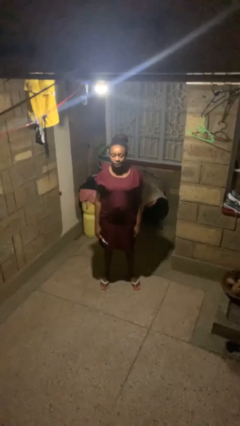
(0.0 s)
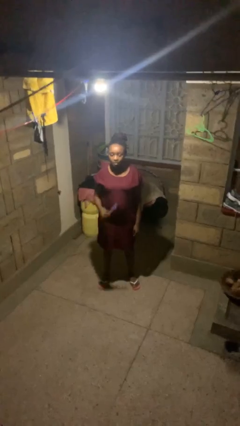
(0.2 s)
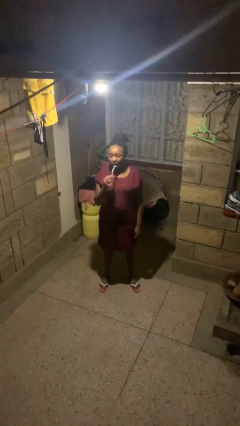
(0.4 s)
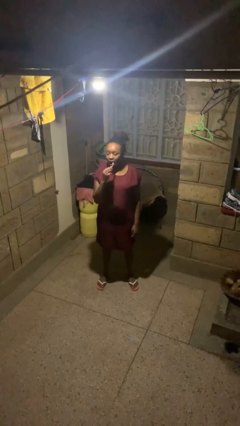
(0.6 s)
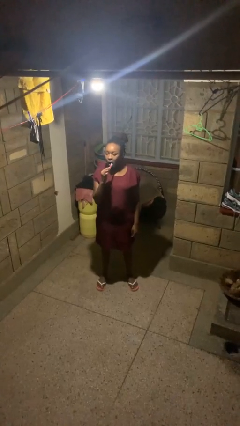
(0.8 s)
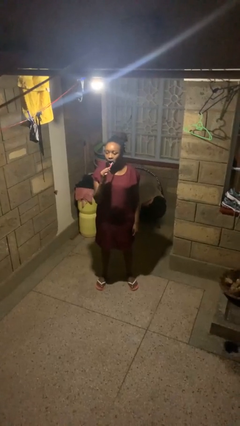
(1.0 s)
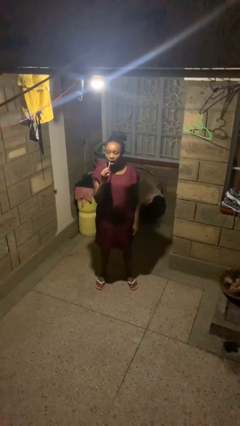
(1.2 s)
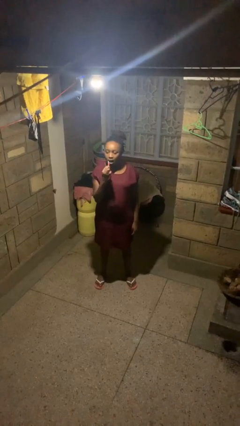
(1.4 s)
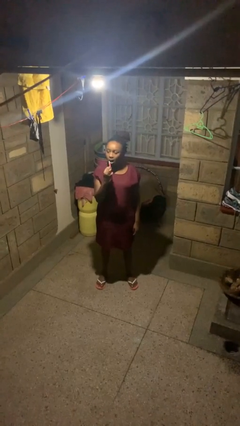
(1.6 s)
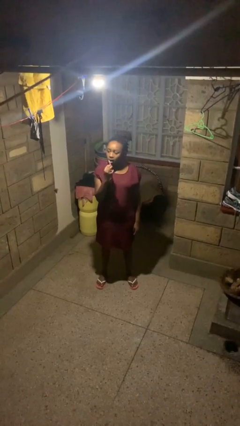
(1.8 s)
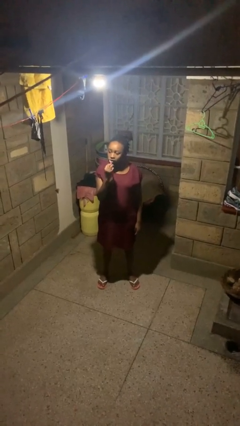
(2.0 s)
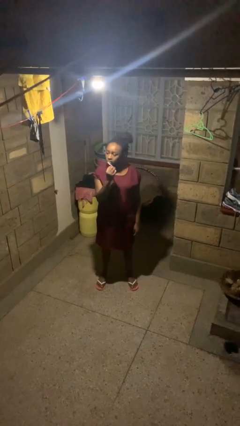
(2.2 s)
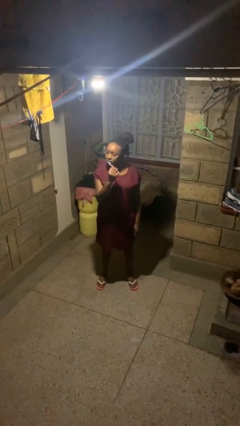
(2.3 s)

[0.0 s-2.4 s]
person brushes teeth

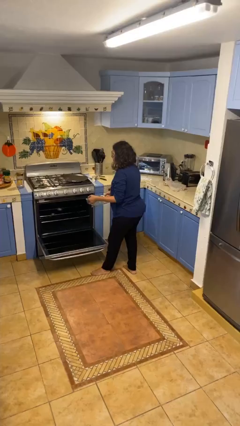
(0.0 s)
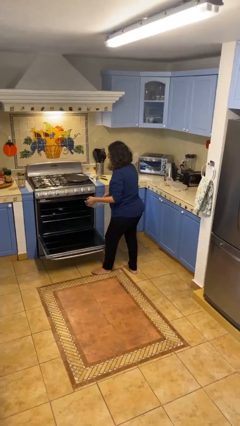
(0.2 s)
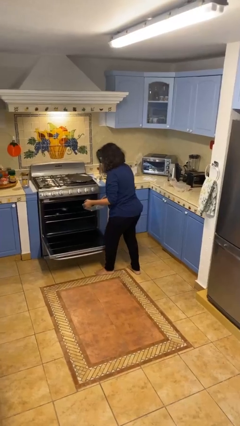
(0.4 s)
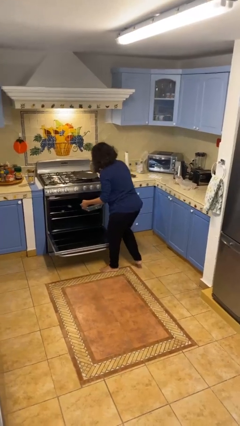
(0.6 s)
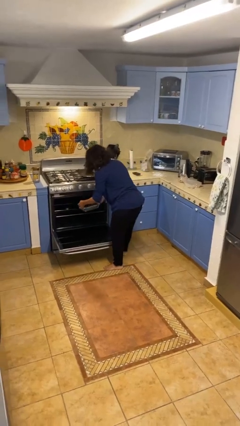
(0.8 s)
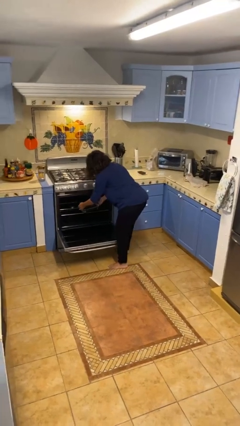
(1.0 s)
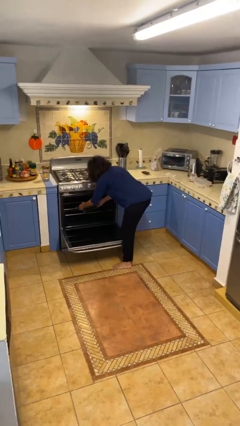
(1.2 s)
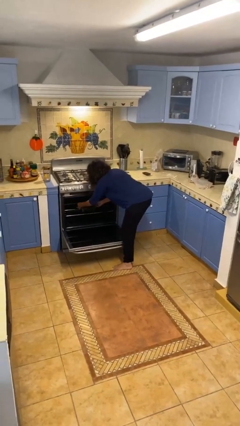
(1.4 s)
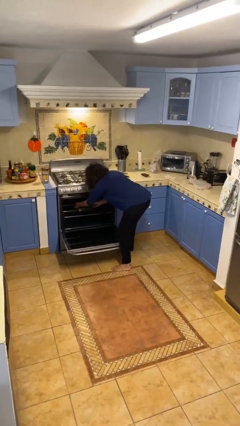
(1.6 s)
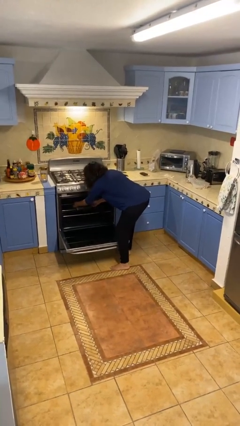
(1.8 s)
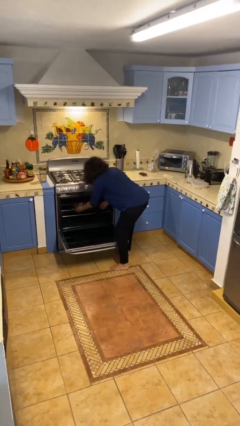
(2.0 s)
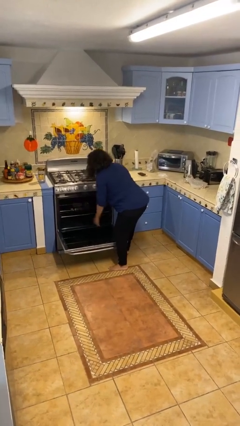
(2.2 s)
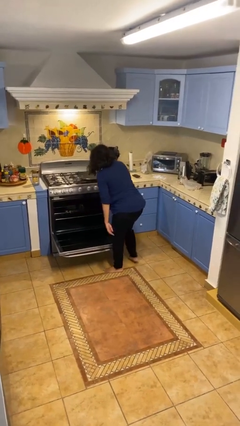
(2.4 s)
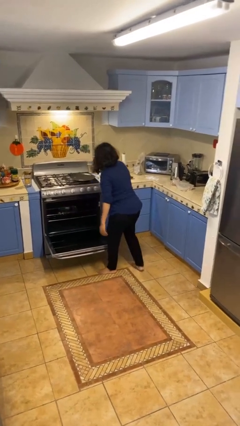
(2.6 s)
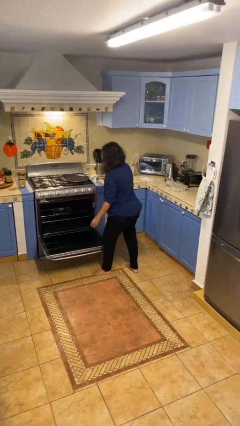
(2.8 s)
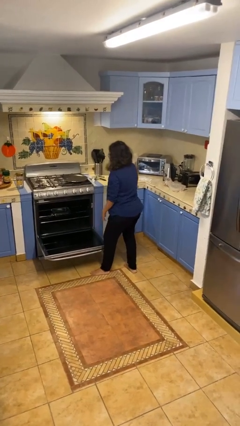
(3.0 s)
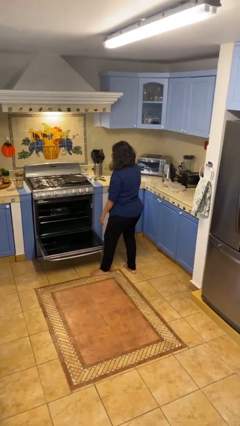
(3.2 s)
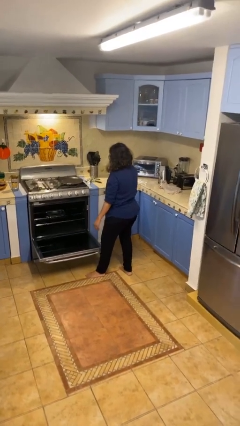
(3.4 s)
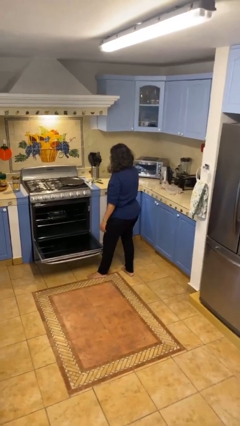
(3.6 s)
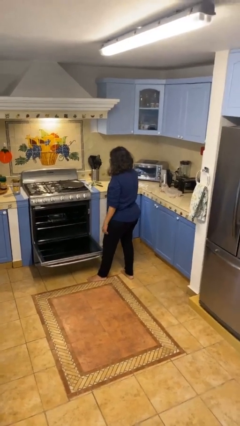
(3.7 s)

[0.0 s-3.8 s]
person puts object into oven

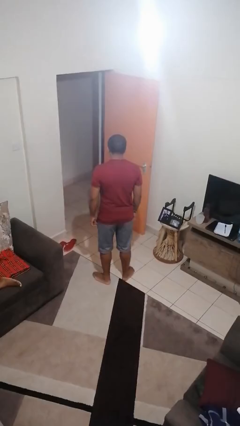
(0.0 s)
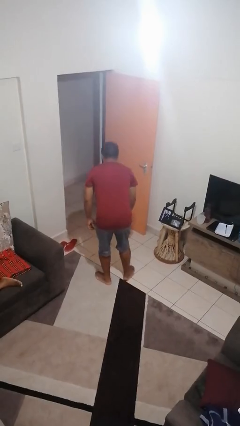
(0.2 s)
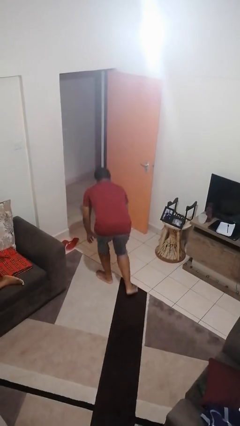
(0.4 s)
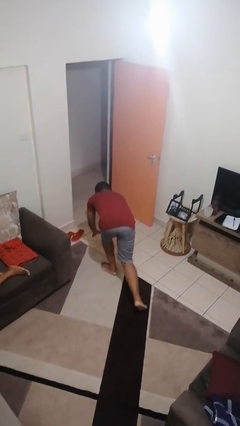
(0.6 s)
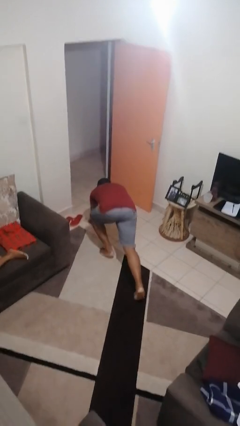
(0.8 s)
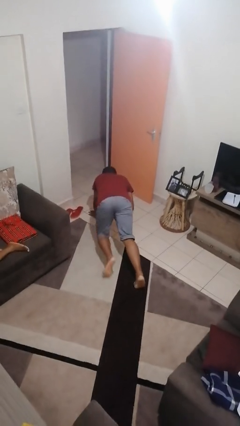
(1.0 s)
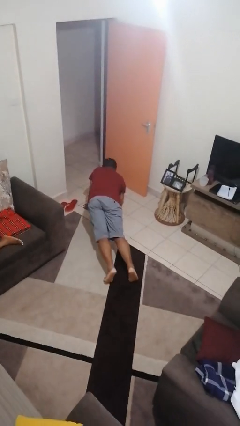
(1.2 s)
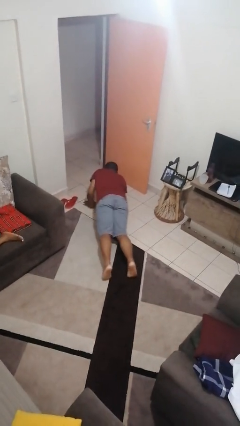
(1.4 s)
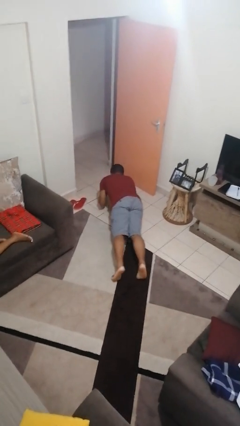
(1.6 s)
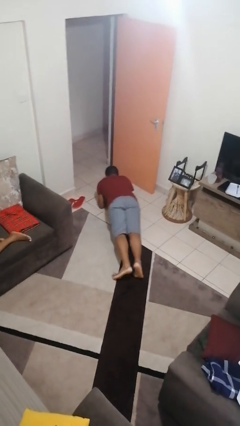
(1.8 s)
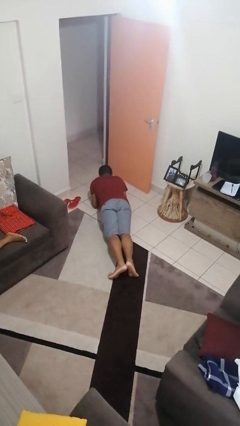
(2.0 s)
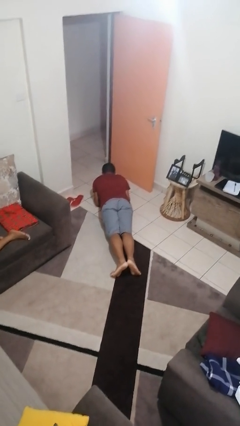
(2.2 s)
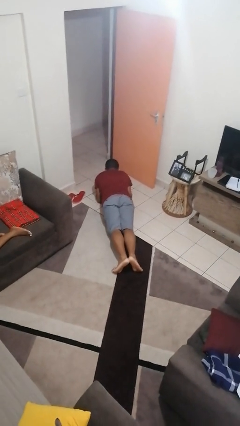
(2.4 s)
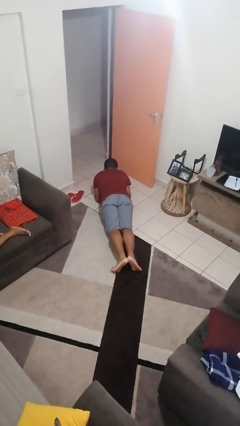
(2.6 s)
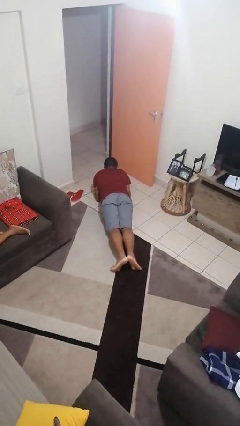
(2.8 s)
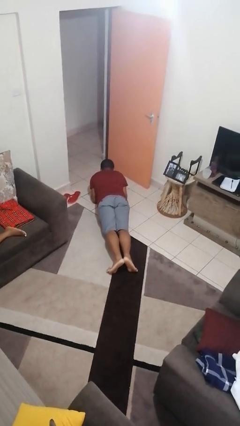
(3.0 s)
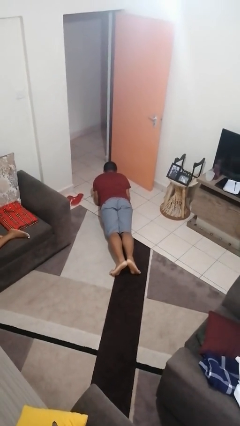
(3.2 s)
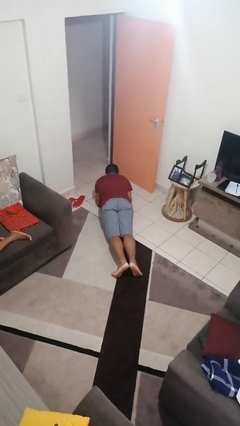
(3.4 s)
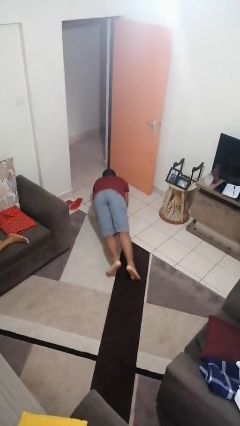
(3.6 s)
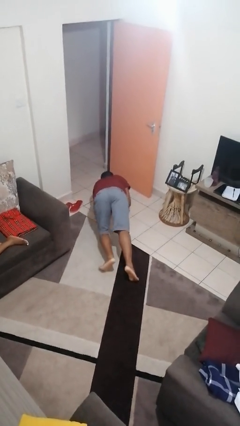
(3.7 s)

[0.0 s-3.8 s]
person exercises with plank

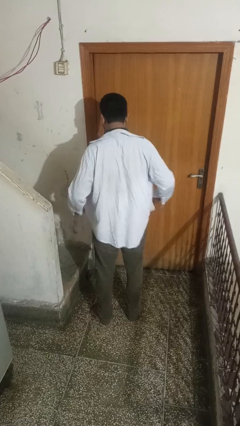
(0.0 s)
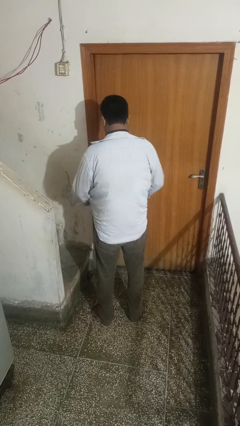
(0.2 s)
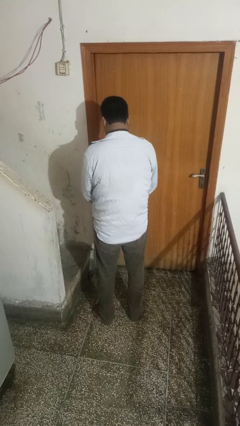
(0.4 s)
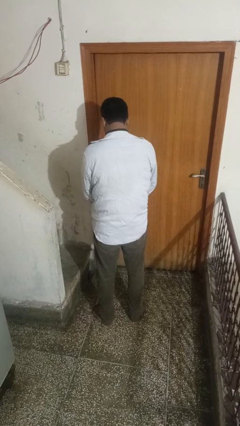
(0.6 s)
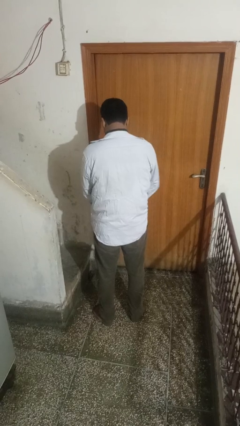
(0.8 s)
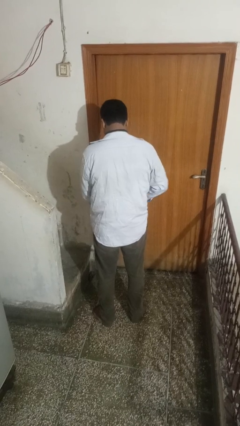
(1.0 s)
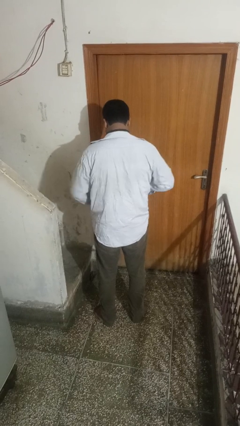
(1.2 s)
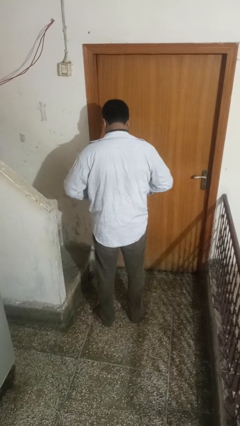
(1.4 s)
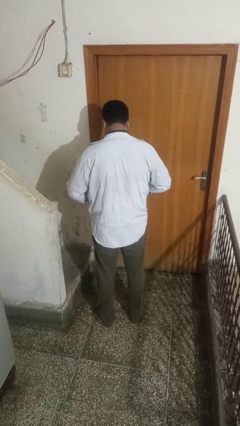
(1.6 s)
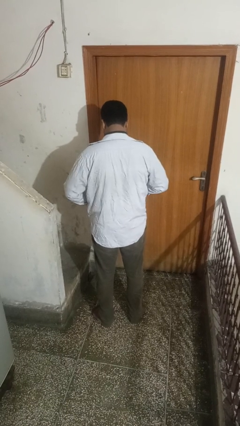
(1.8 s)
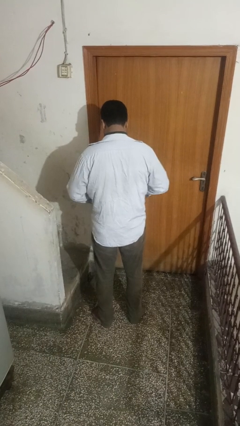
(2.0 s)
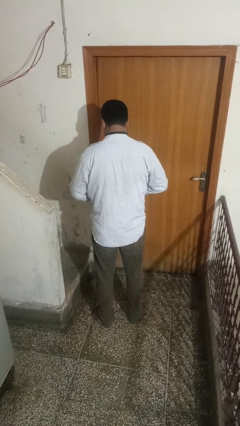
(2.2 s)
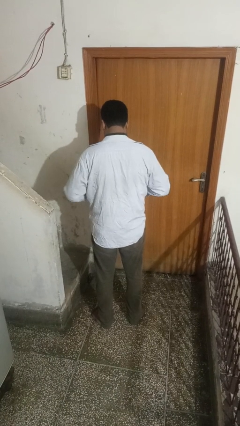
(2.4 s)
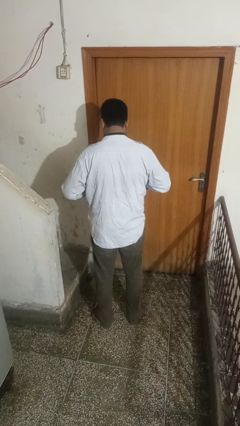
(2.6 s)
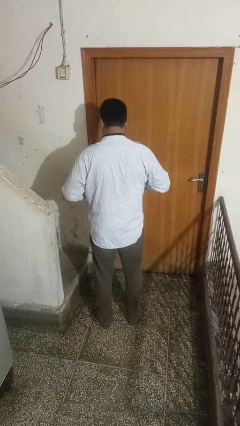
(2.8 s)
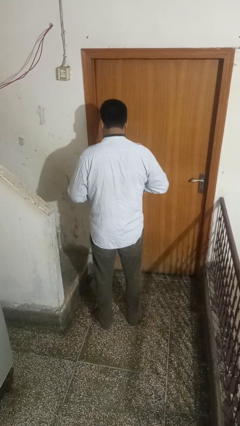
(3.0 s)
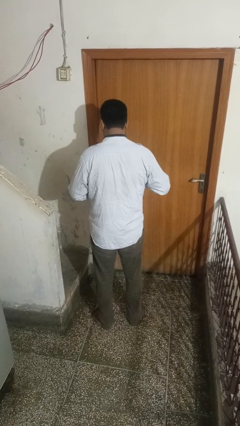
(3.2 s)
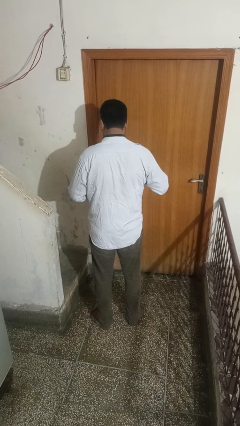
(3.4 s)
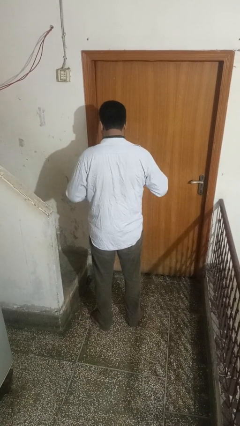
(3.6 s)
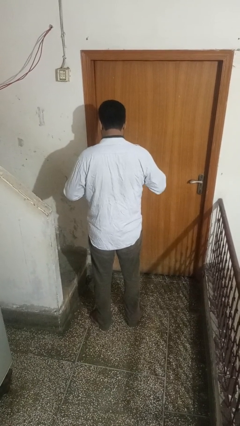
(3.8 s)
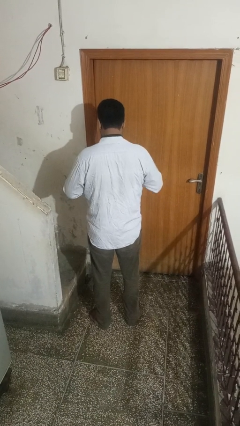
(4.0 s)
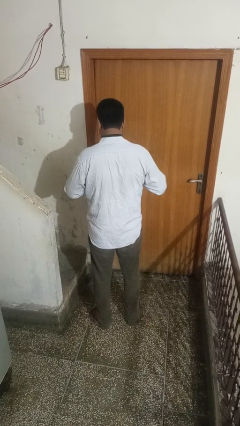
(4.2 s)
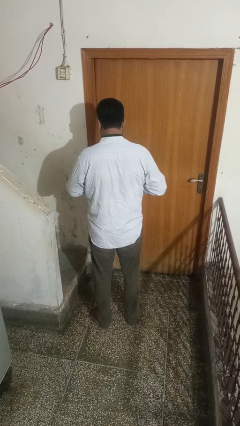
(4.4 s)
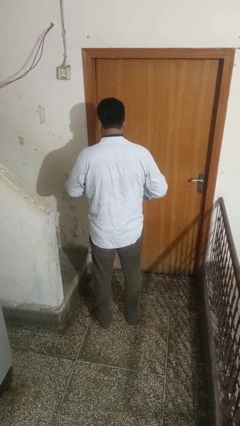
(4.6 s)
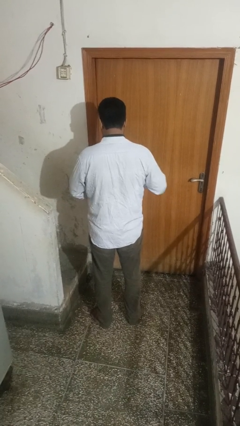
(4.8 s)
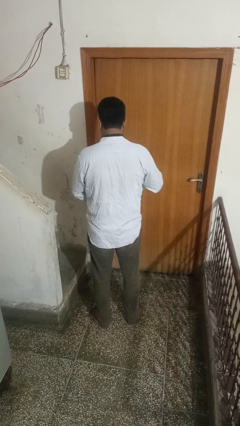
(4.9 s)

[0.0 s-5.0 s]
person buttons shirt

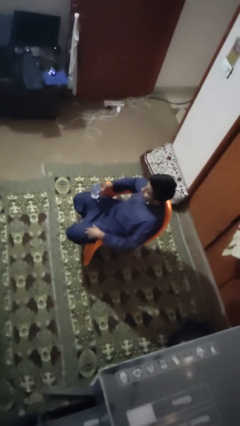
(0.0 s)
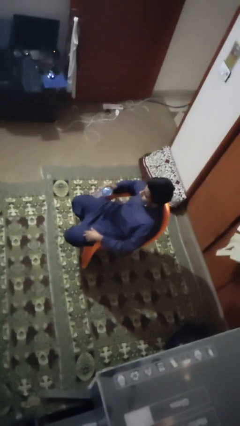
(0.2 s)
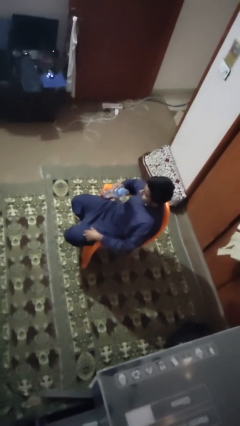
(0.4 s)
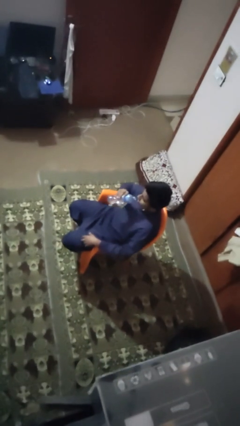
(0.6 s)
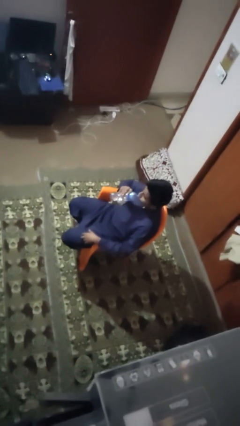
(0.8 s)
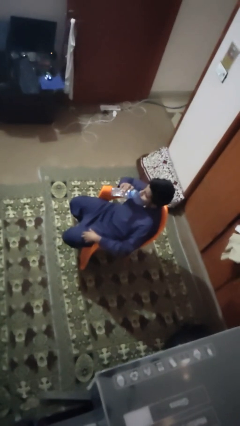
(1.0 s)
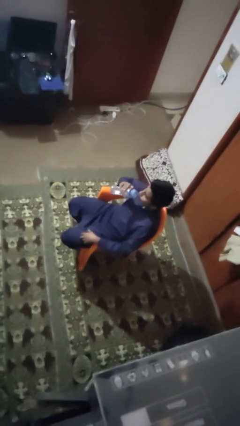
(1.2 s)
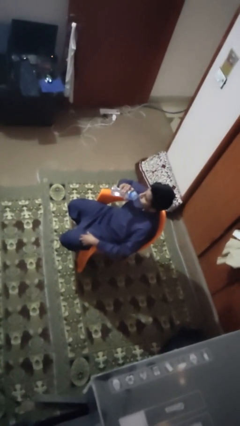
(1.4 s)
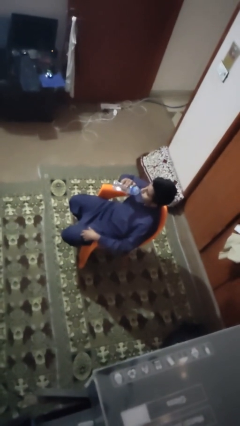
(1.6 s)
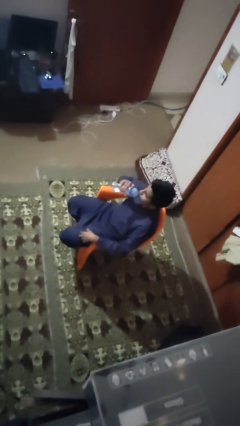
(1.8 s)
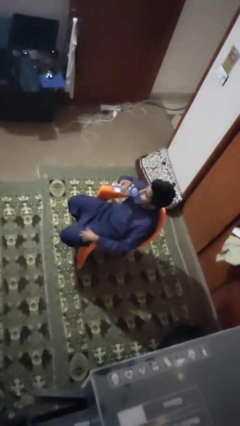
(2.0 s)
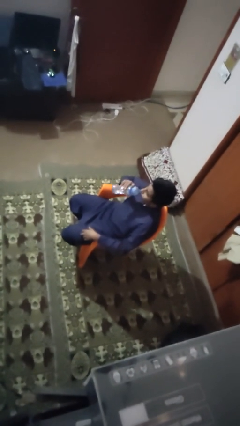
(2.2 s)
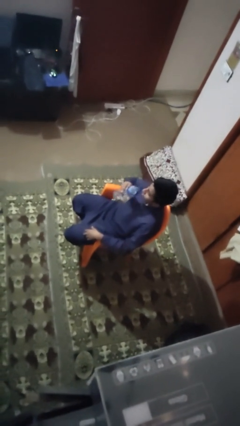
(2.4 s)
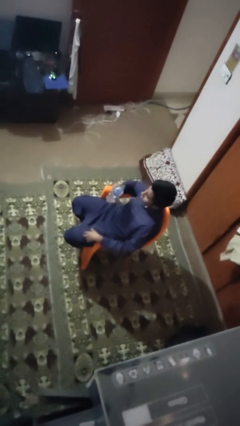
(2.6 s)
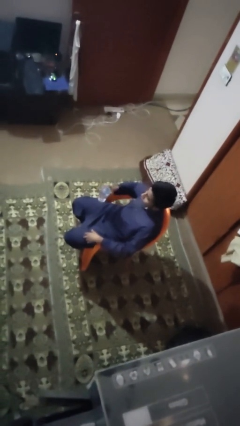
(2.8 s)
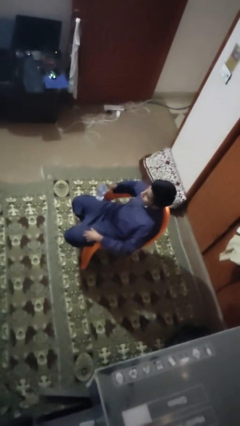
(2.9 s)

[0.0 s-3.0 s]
person drinks from bottle
